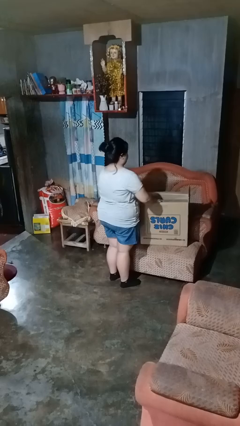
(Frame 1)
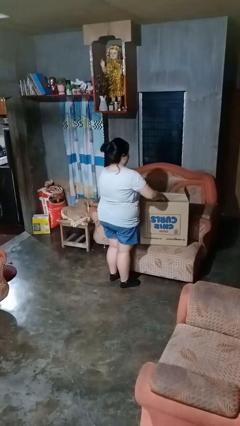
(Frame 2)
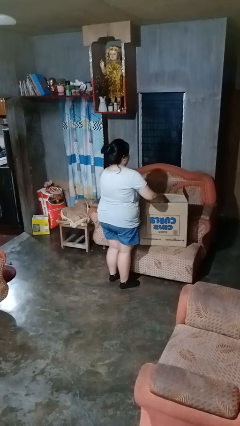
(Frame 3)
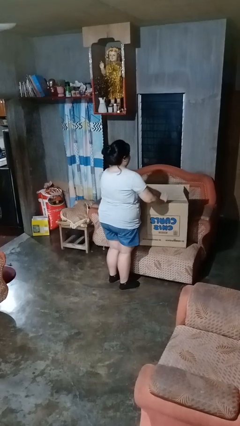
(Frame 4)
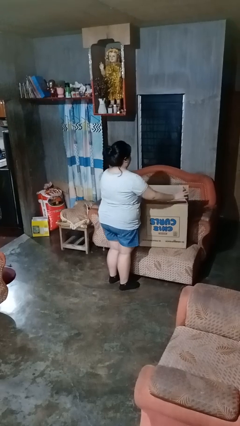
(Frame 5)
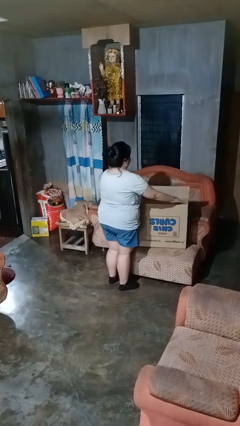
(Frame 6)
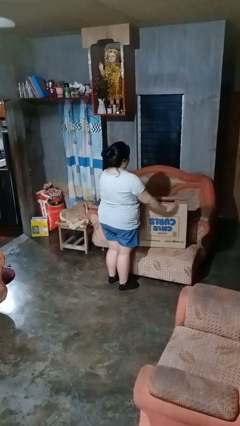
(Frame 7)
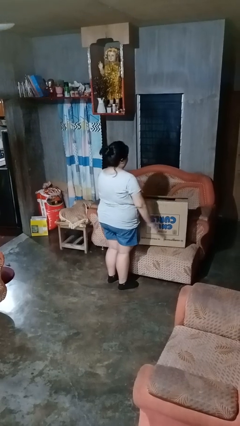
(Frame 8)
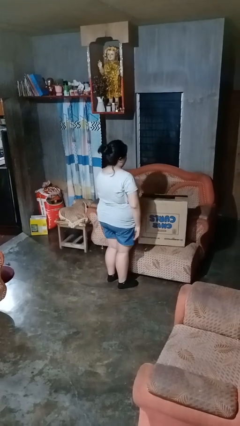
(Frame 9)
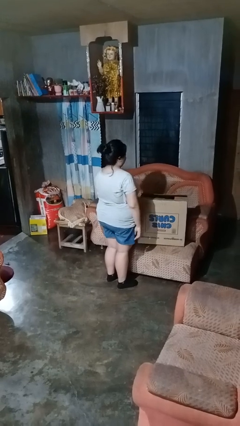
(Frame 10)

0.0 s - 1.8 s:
person closes box

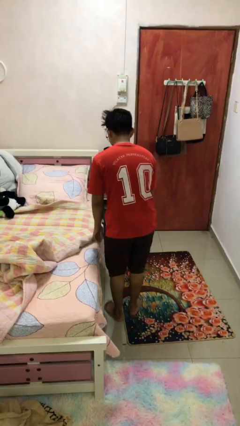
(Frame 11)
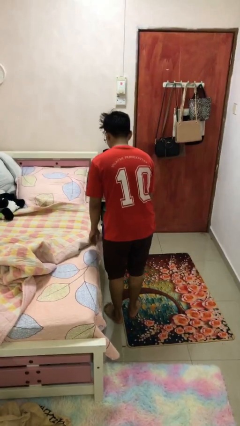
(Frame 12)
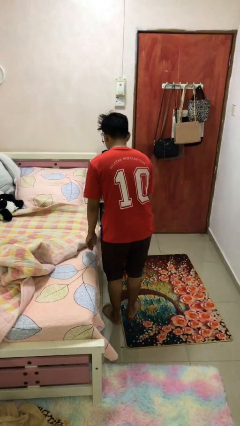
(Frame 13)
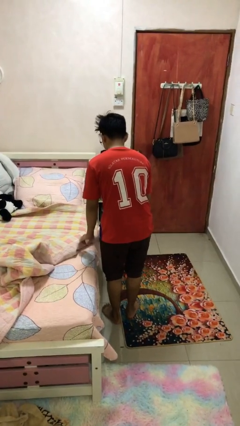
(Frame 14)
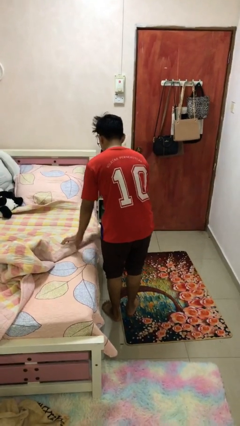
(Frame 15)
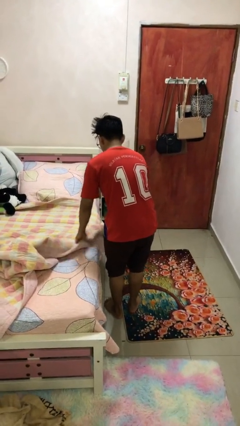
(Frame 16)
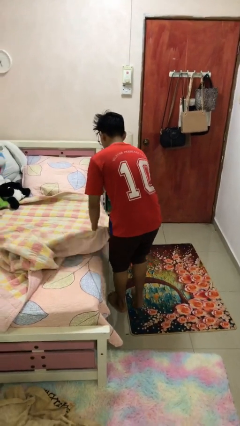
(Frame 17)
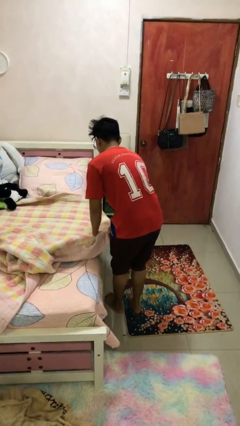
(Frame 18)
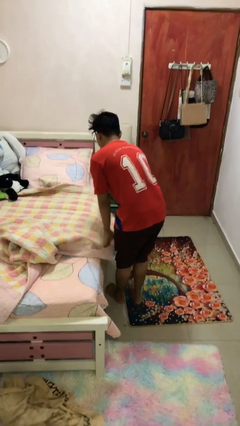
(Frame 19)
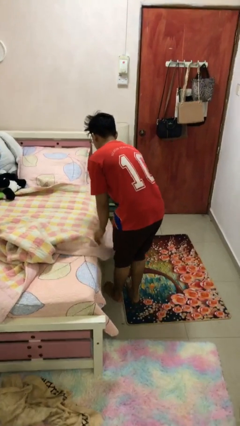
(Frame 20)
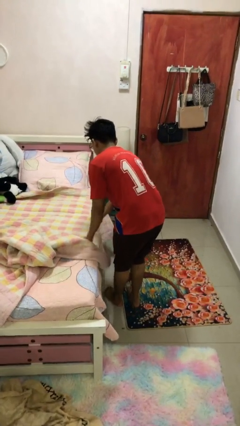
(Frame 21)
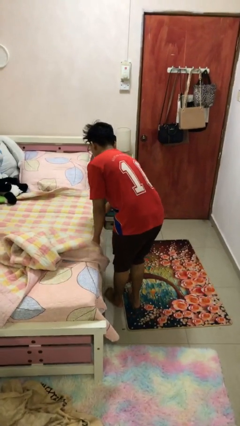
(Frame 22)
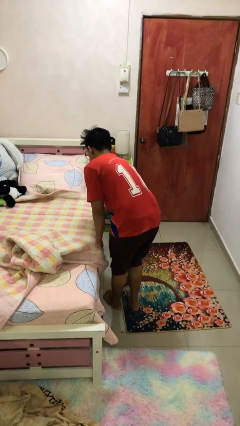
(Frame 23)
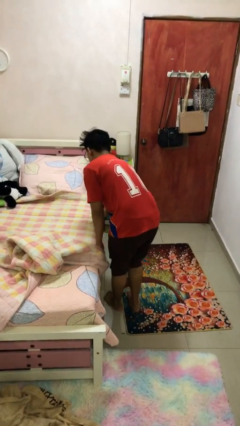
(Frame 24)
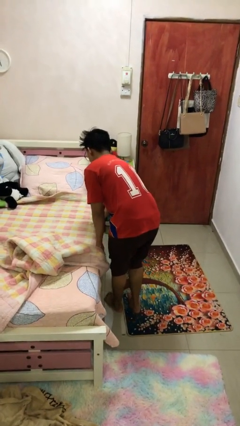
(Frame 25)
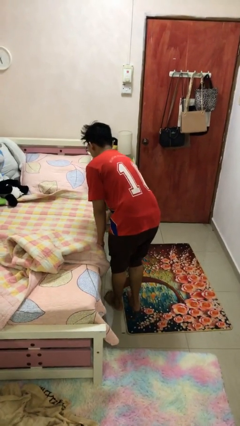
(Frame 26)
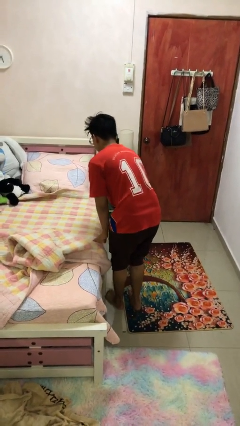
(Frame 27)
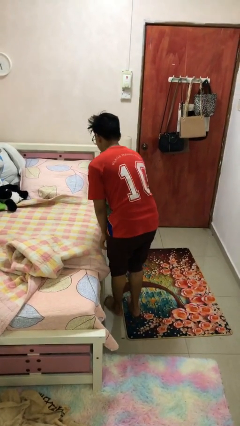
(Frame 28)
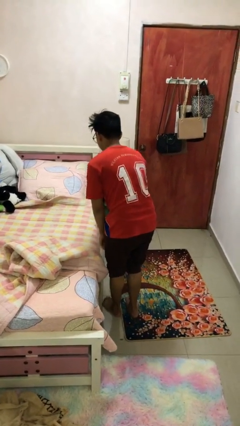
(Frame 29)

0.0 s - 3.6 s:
person makes bed

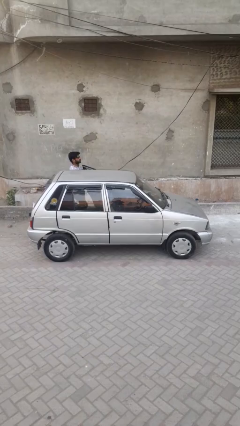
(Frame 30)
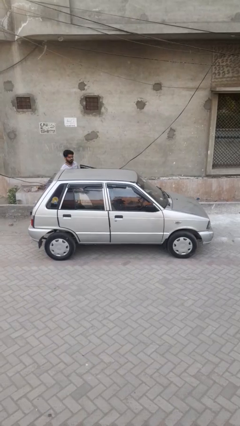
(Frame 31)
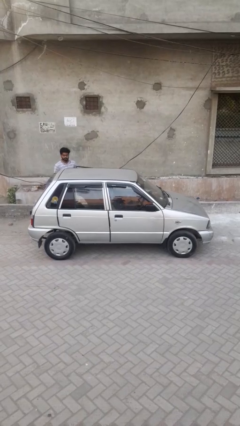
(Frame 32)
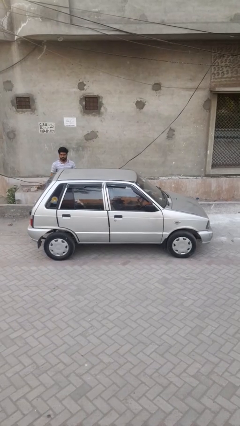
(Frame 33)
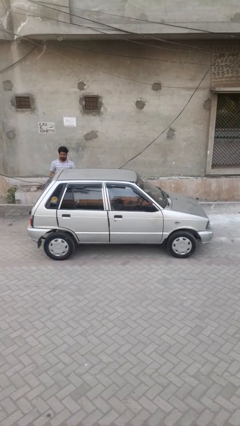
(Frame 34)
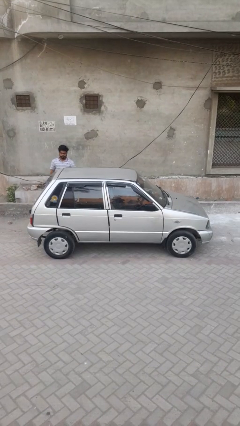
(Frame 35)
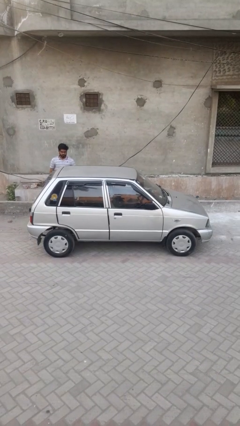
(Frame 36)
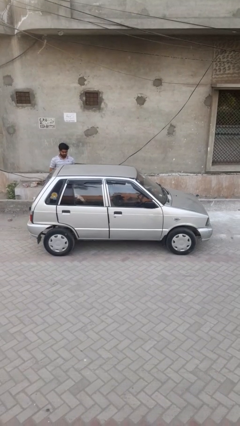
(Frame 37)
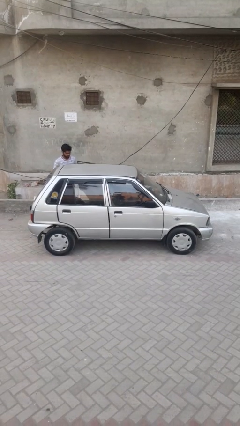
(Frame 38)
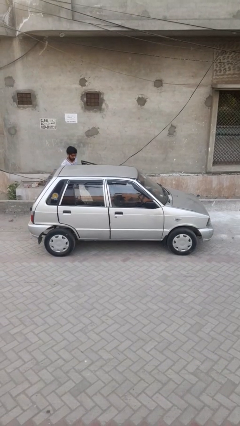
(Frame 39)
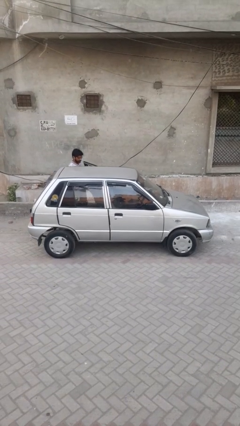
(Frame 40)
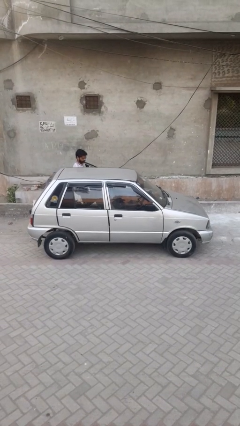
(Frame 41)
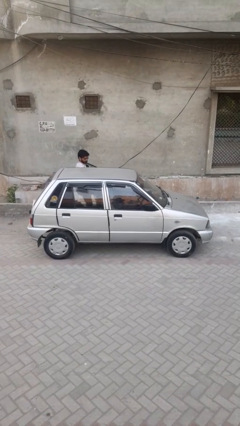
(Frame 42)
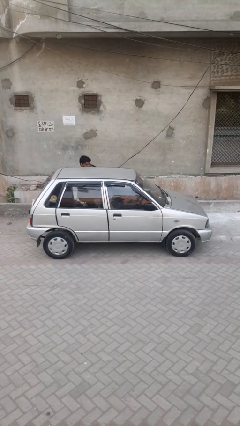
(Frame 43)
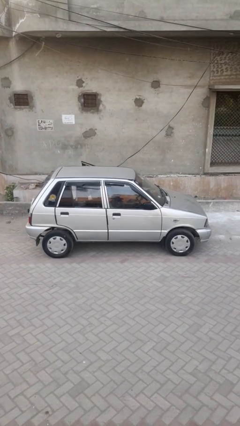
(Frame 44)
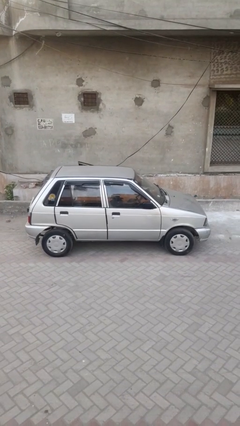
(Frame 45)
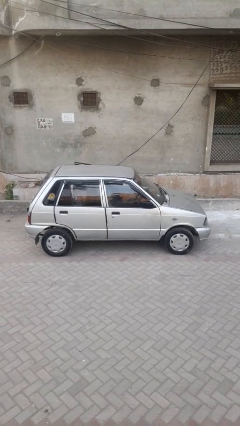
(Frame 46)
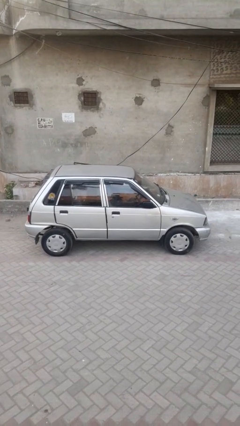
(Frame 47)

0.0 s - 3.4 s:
car picks up person

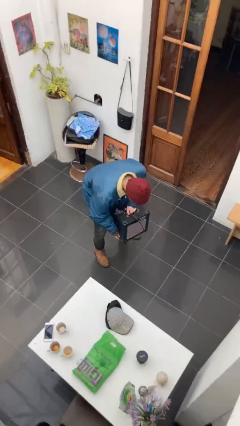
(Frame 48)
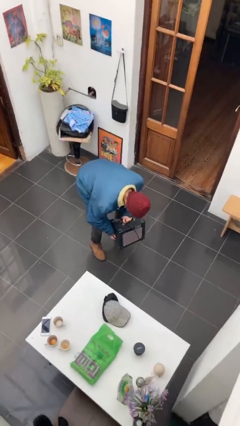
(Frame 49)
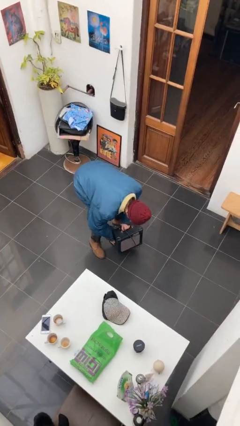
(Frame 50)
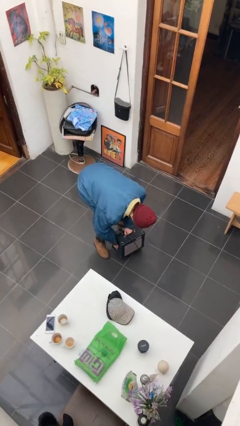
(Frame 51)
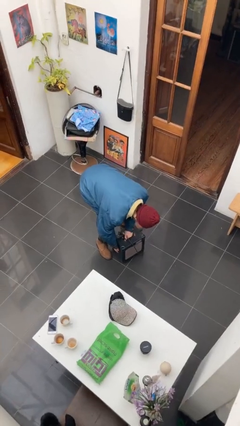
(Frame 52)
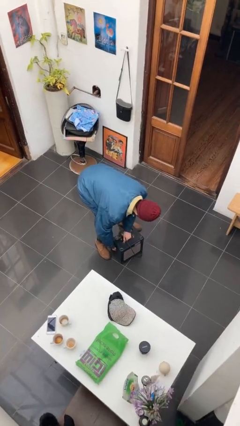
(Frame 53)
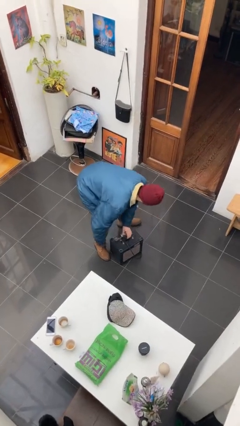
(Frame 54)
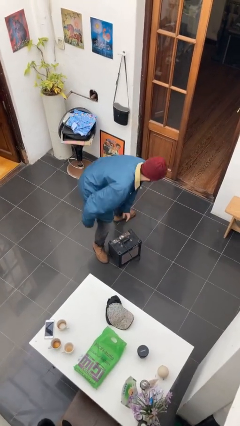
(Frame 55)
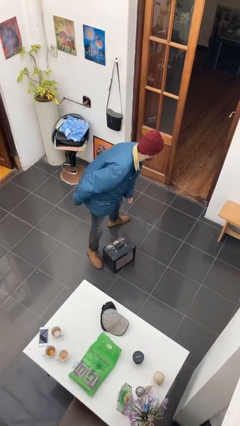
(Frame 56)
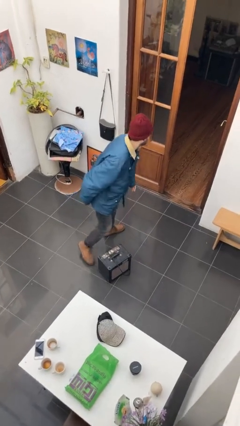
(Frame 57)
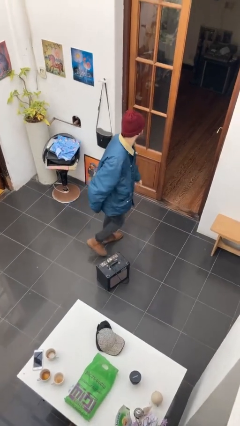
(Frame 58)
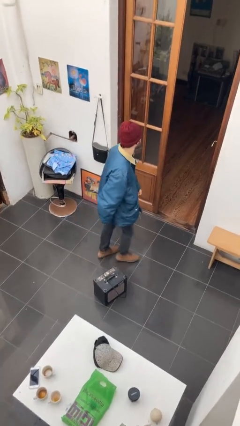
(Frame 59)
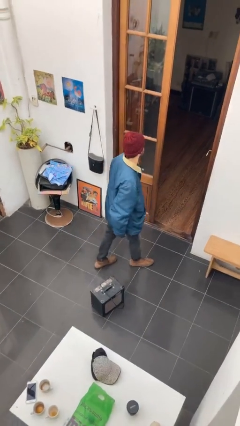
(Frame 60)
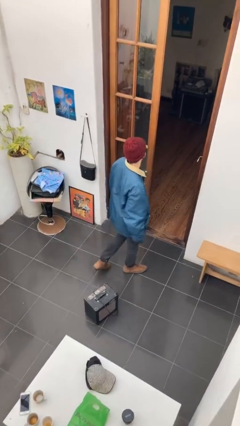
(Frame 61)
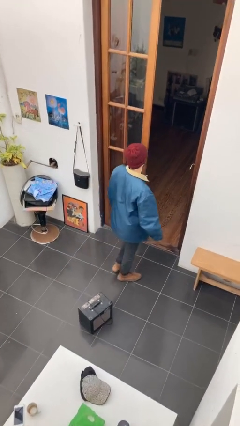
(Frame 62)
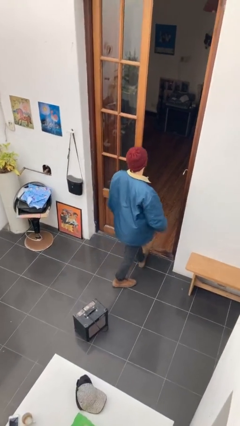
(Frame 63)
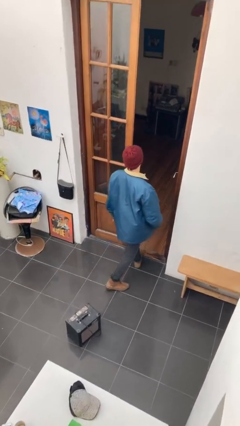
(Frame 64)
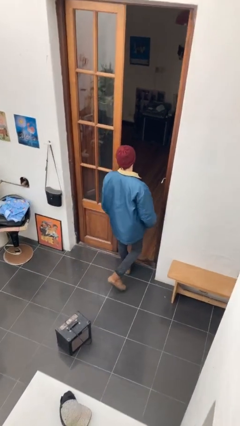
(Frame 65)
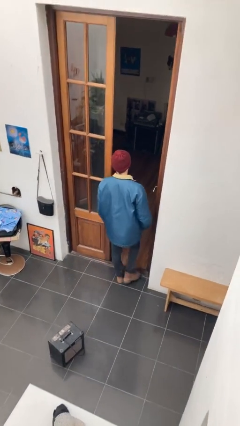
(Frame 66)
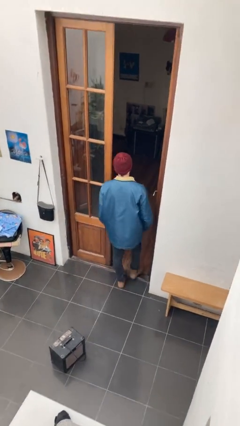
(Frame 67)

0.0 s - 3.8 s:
person puts down object on floor

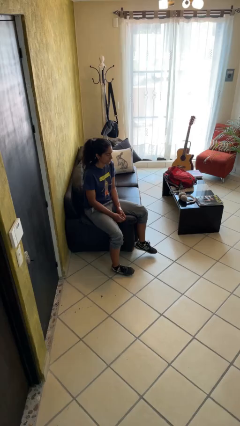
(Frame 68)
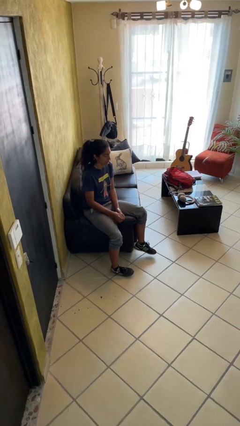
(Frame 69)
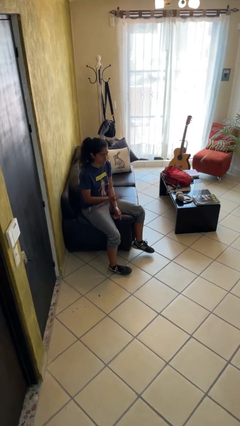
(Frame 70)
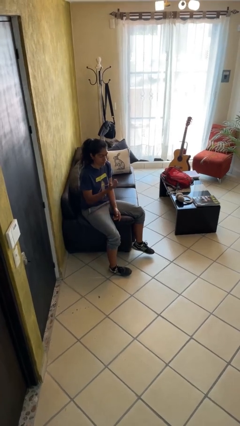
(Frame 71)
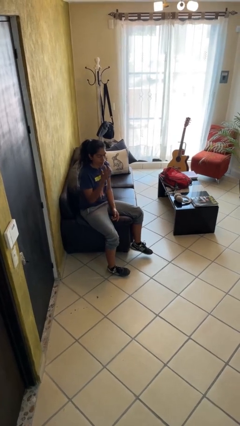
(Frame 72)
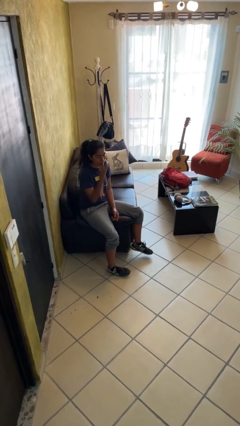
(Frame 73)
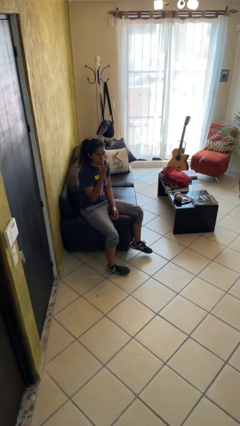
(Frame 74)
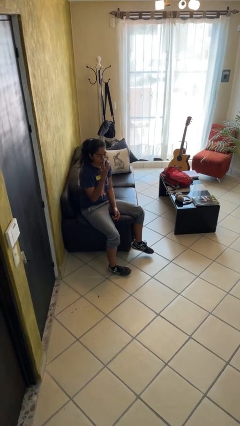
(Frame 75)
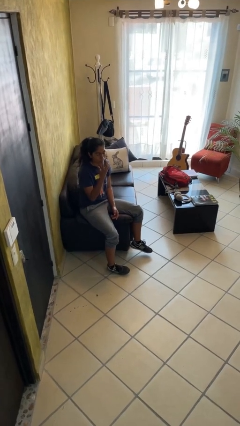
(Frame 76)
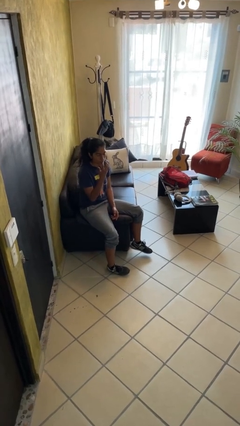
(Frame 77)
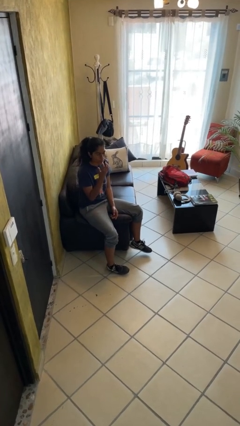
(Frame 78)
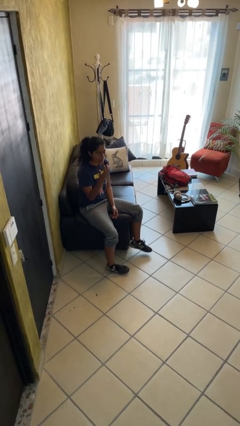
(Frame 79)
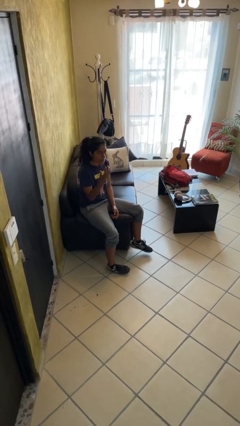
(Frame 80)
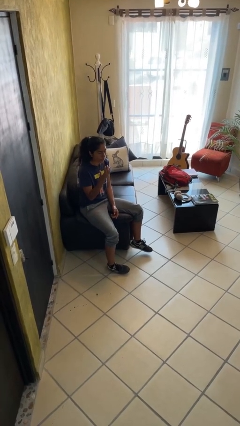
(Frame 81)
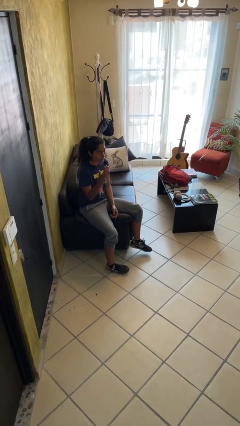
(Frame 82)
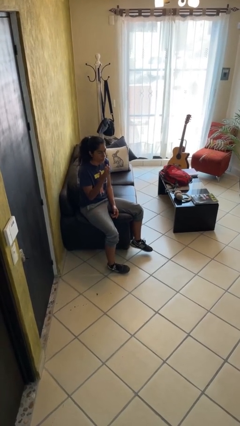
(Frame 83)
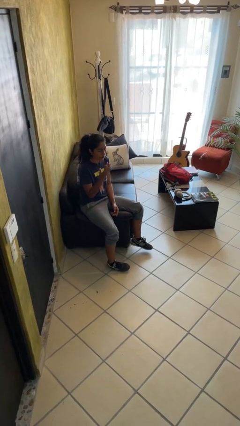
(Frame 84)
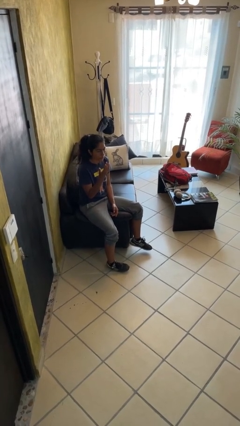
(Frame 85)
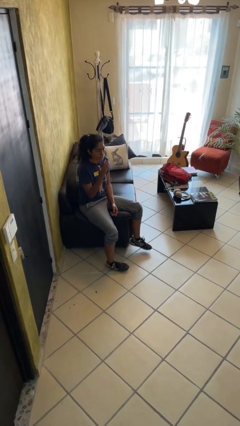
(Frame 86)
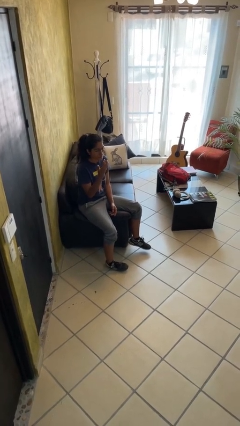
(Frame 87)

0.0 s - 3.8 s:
person licks fingers

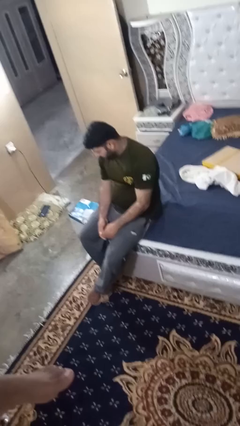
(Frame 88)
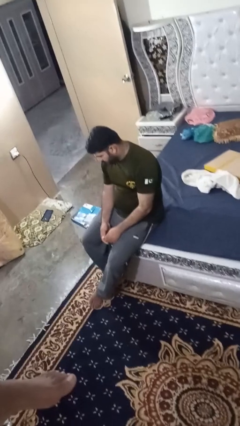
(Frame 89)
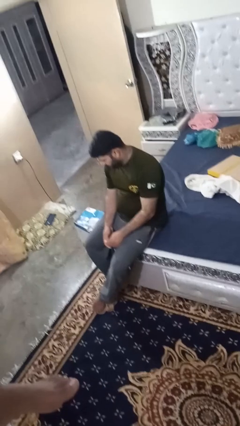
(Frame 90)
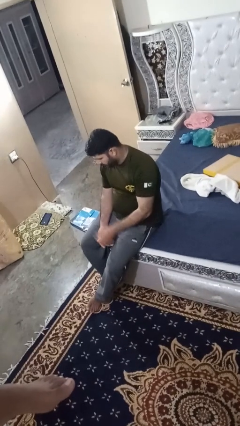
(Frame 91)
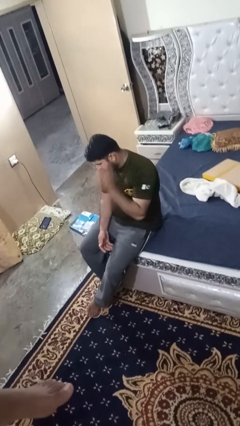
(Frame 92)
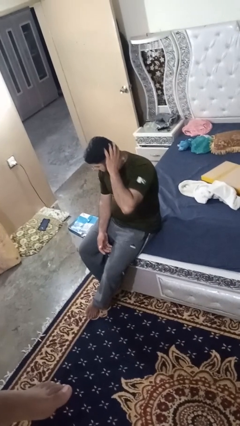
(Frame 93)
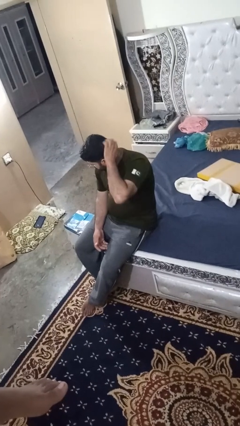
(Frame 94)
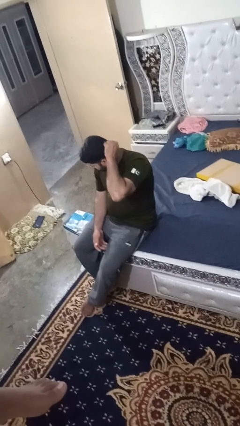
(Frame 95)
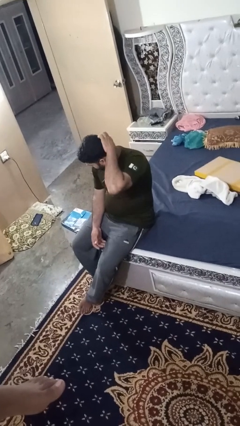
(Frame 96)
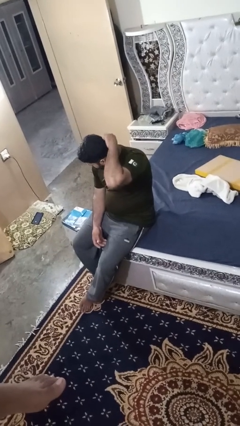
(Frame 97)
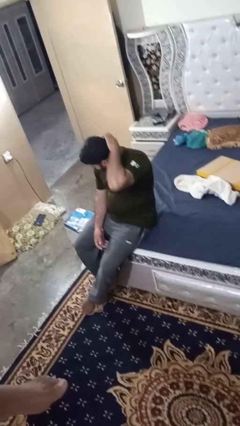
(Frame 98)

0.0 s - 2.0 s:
person strokes hair
